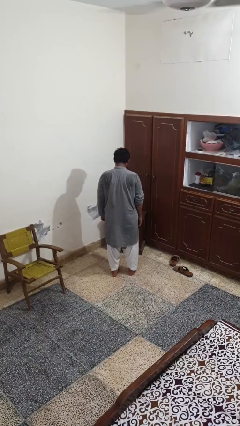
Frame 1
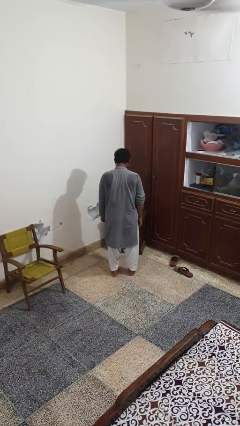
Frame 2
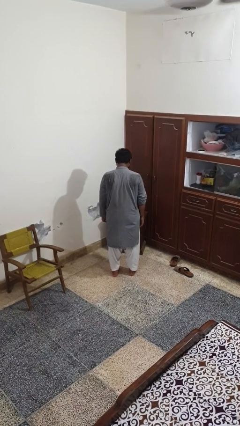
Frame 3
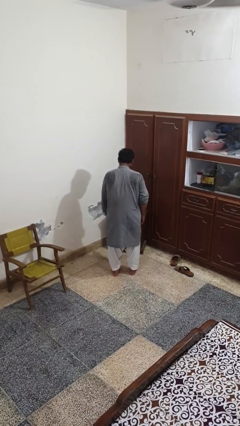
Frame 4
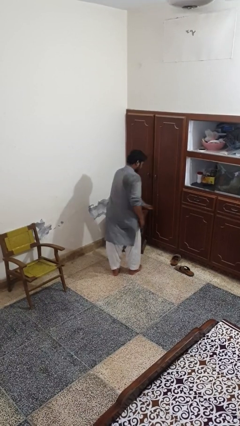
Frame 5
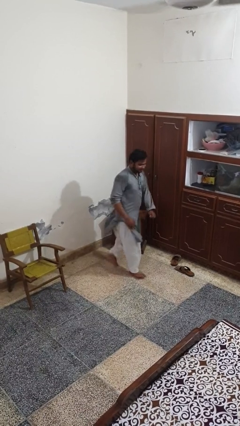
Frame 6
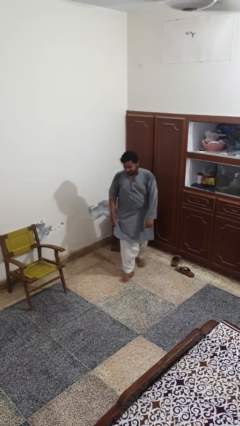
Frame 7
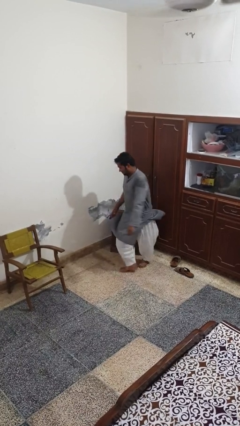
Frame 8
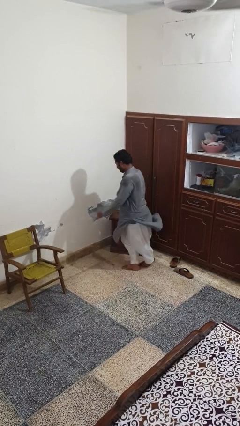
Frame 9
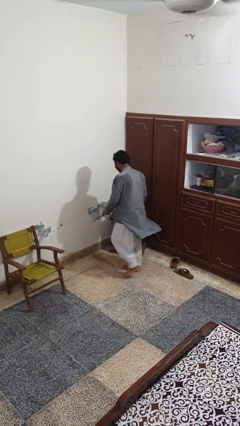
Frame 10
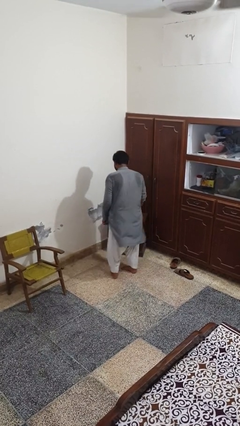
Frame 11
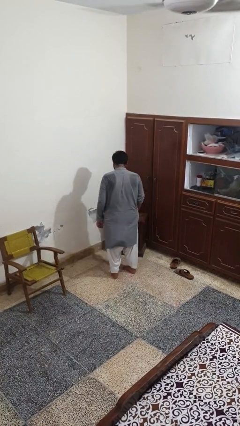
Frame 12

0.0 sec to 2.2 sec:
person twirls

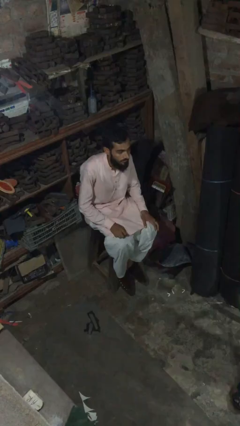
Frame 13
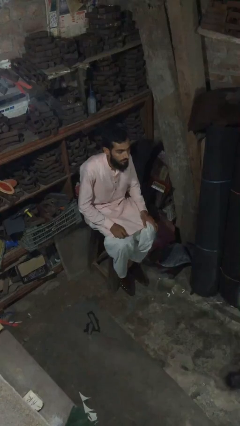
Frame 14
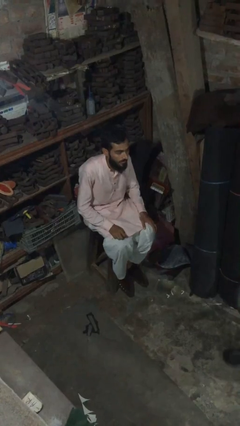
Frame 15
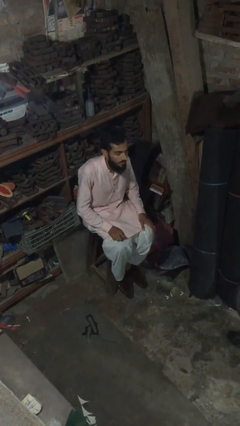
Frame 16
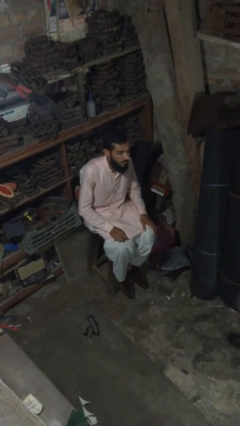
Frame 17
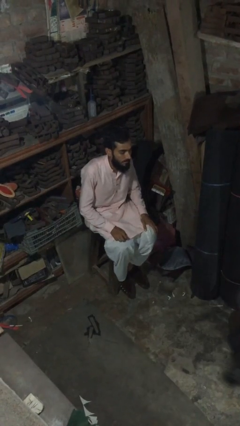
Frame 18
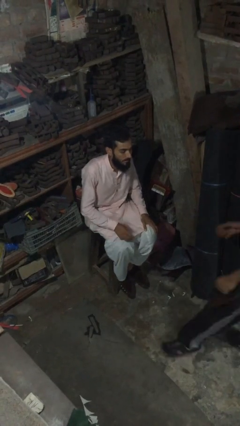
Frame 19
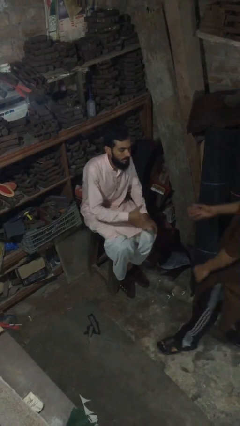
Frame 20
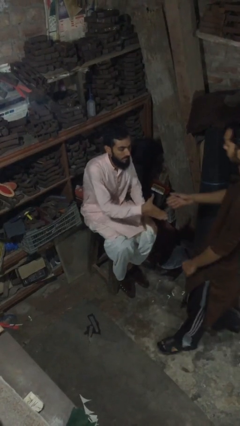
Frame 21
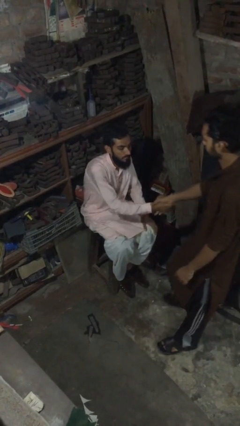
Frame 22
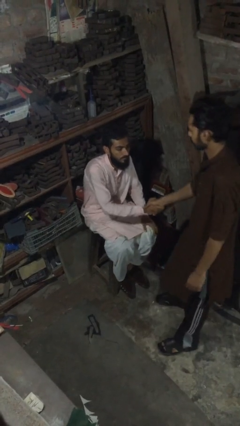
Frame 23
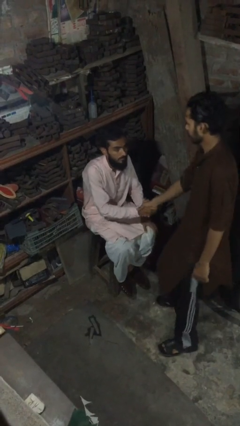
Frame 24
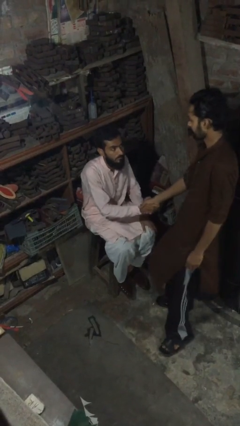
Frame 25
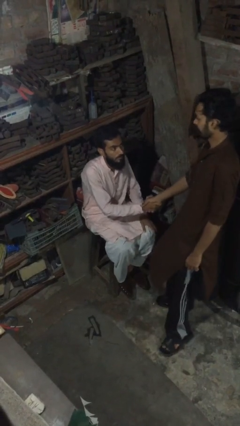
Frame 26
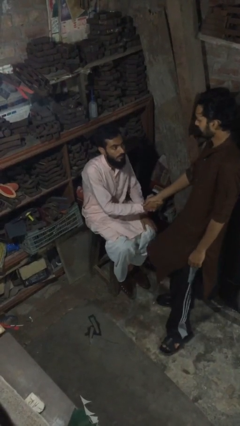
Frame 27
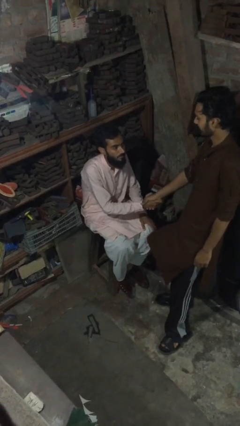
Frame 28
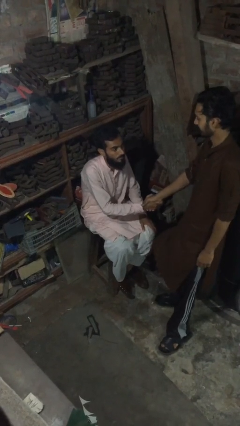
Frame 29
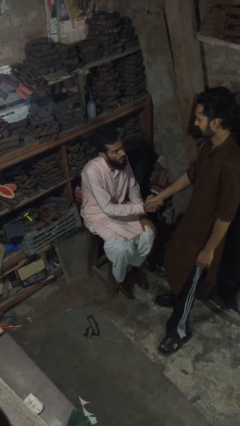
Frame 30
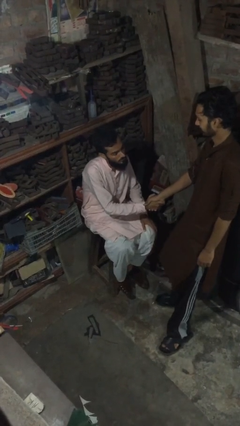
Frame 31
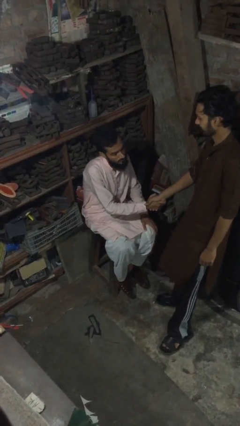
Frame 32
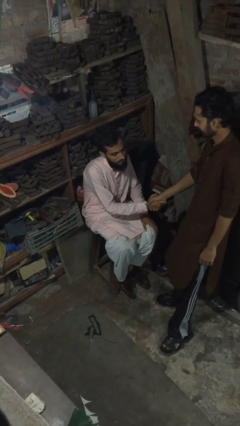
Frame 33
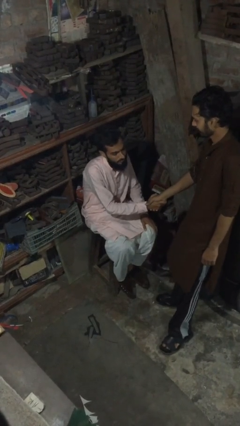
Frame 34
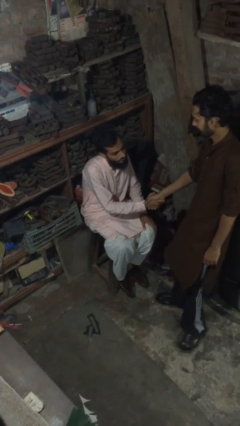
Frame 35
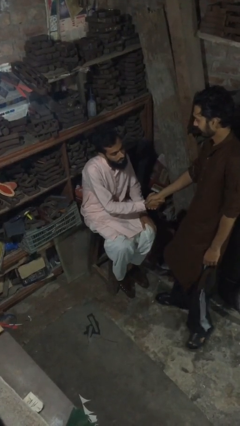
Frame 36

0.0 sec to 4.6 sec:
person shakes hand

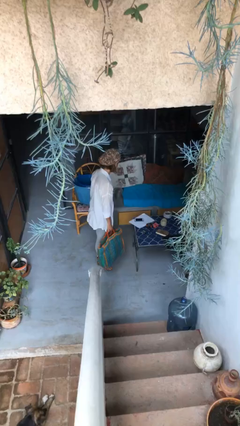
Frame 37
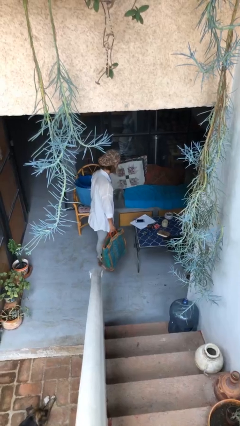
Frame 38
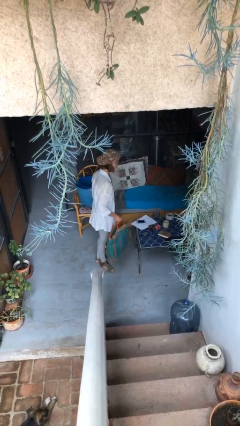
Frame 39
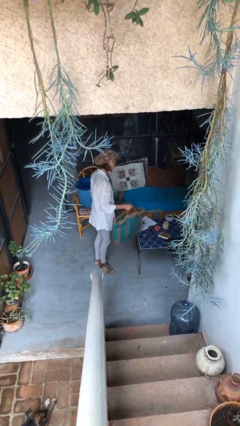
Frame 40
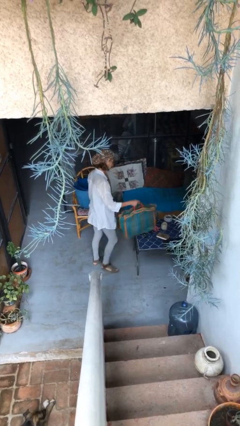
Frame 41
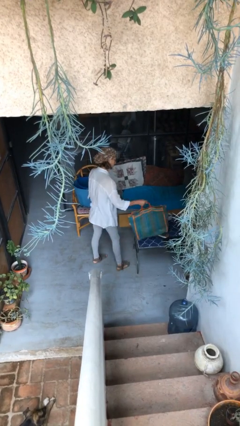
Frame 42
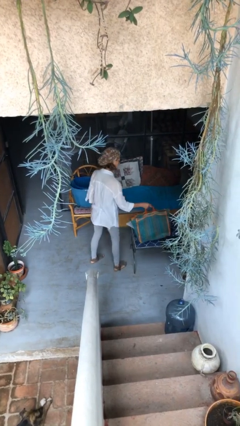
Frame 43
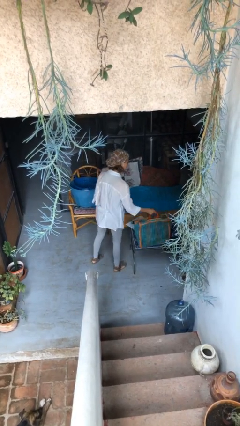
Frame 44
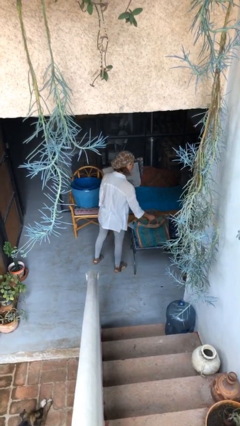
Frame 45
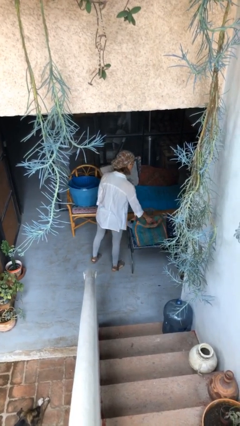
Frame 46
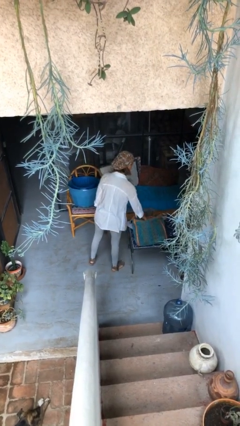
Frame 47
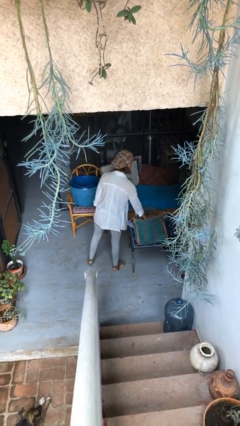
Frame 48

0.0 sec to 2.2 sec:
person puts down object on table

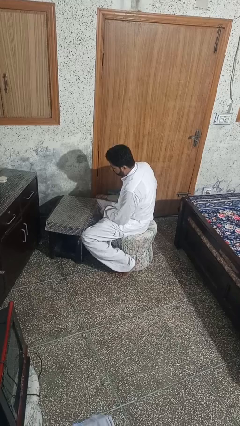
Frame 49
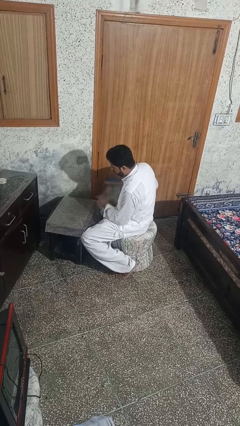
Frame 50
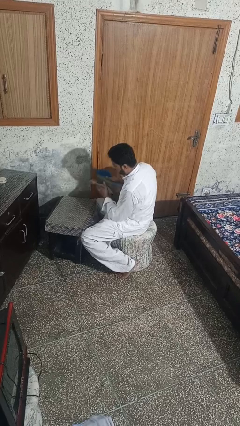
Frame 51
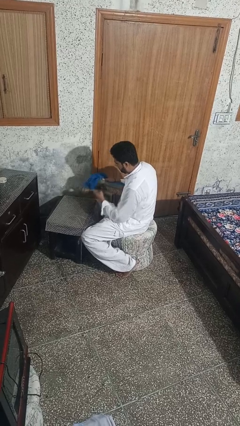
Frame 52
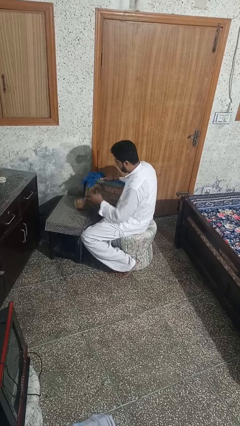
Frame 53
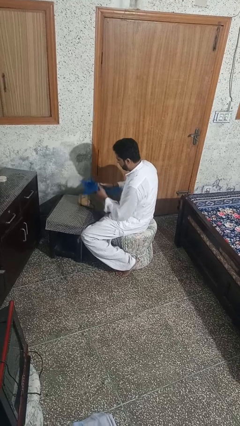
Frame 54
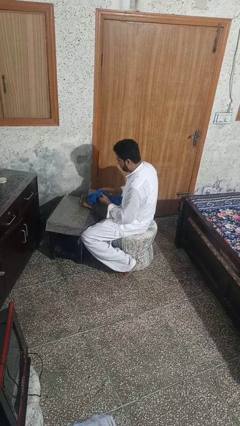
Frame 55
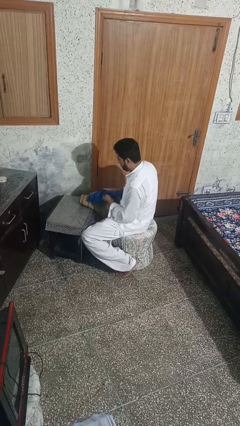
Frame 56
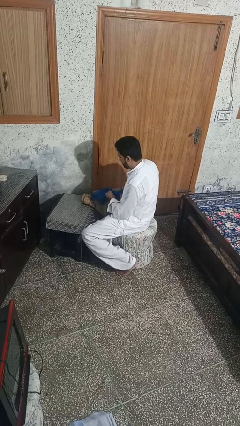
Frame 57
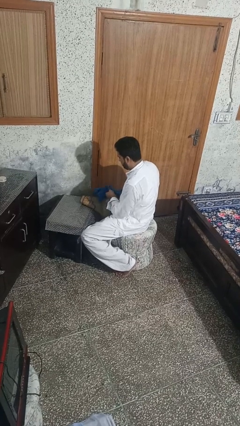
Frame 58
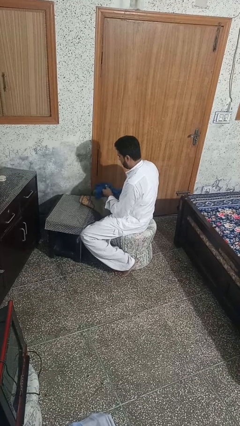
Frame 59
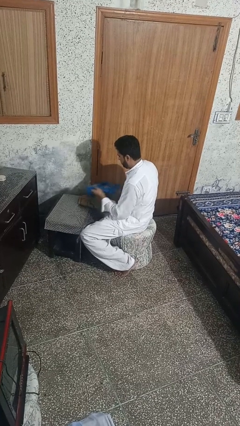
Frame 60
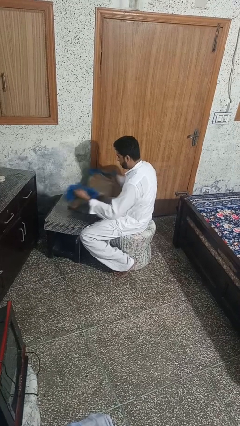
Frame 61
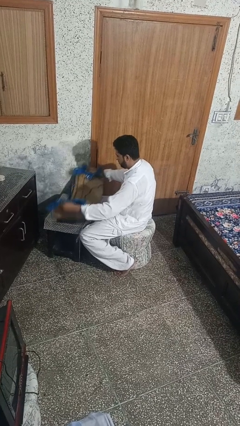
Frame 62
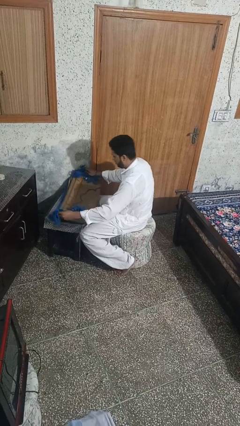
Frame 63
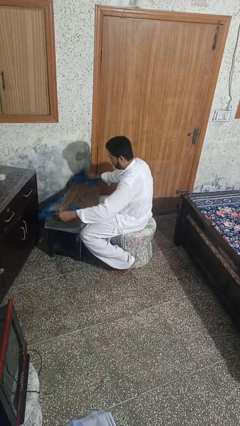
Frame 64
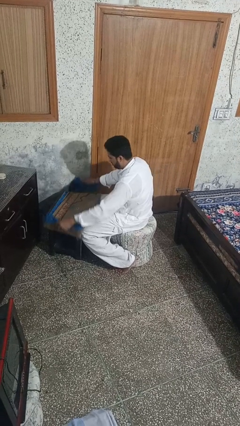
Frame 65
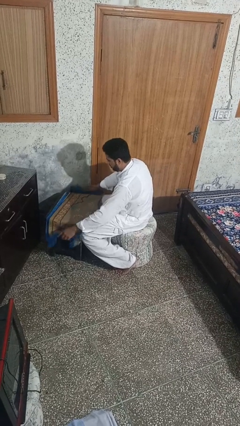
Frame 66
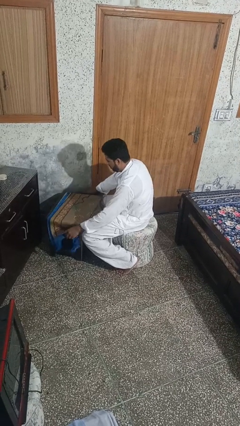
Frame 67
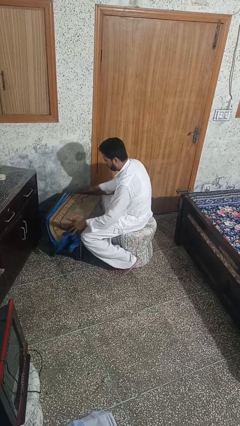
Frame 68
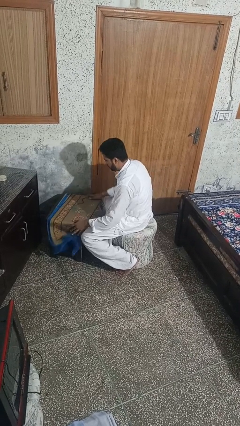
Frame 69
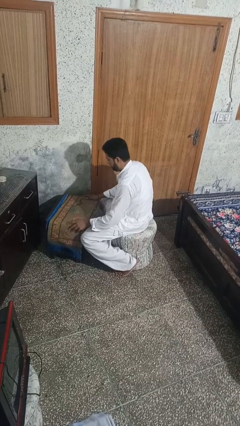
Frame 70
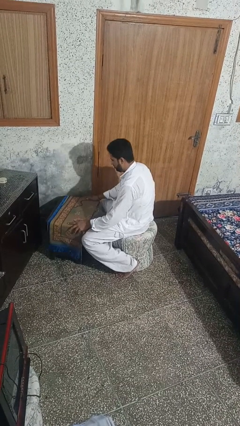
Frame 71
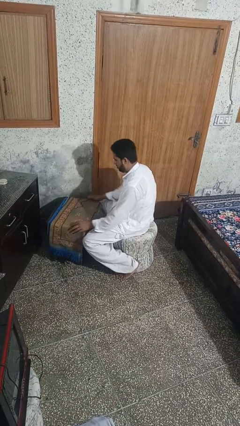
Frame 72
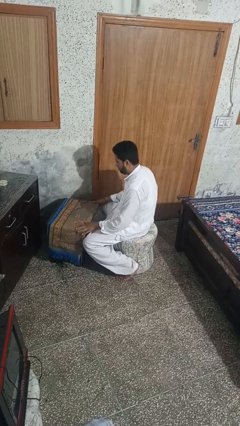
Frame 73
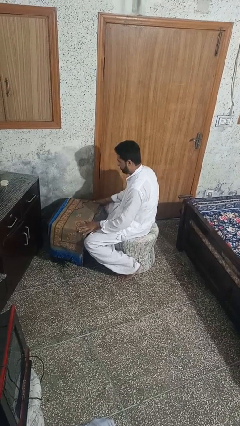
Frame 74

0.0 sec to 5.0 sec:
person spreads tablecloth

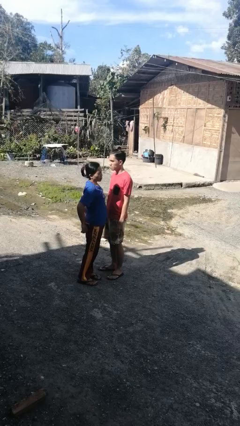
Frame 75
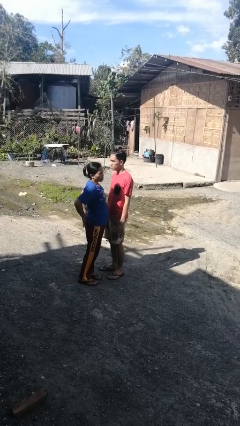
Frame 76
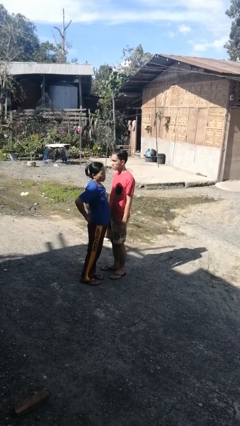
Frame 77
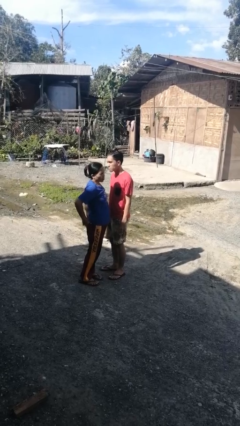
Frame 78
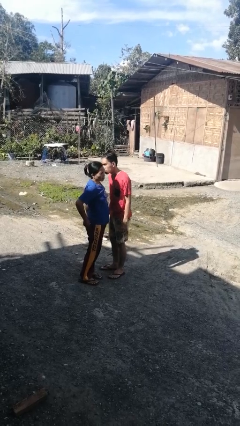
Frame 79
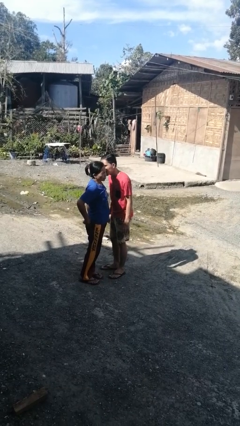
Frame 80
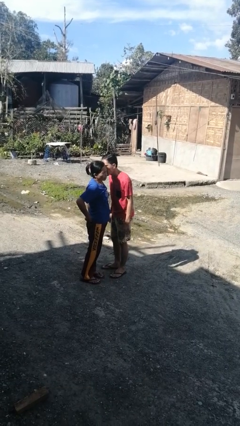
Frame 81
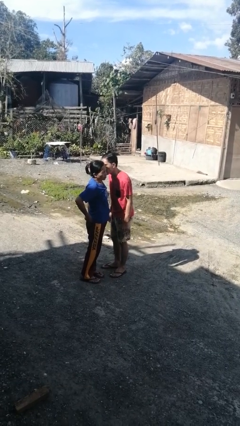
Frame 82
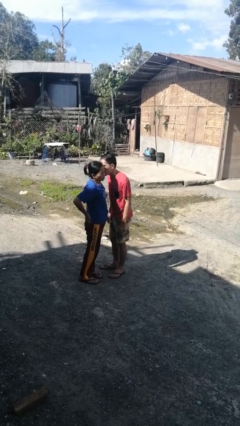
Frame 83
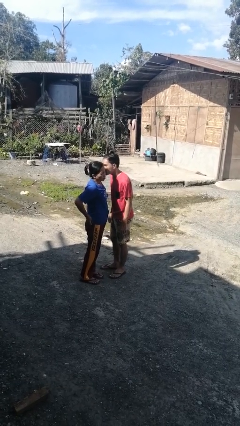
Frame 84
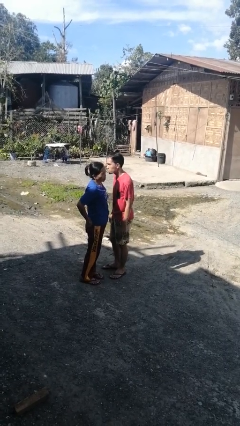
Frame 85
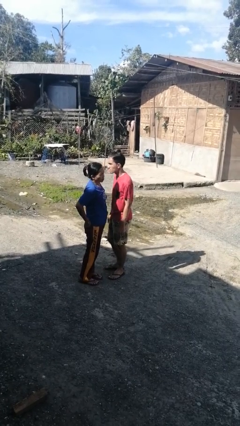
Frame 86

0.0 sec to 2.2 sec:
person kisses cheek of person

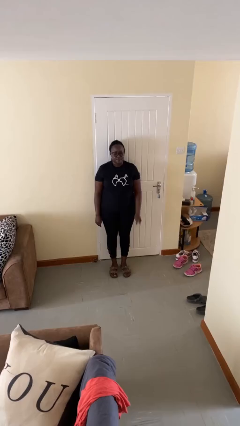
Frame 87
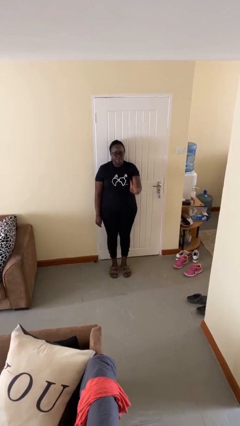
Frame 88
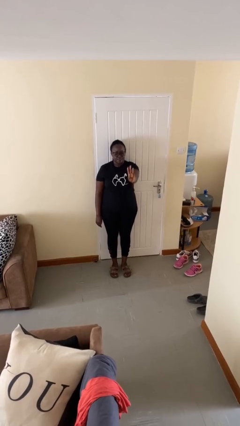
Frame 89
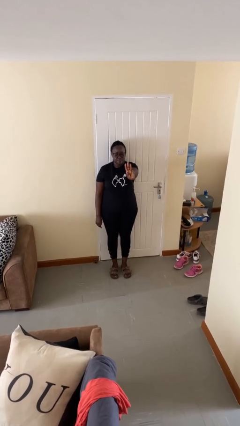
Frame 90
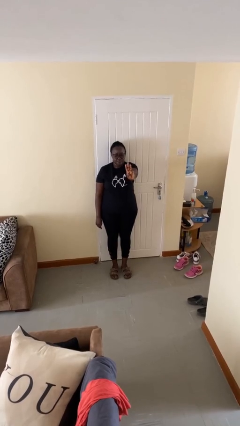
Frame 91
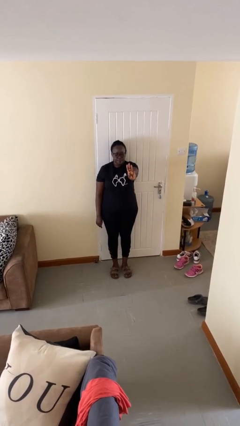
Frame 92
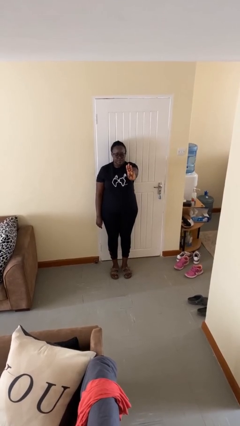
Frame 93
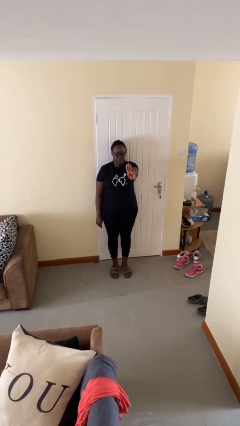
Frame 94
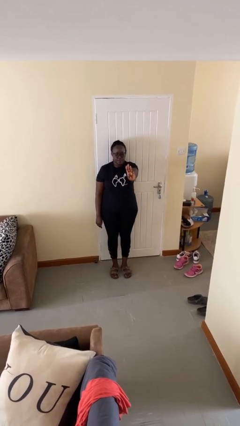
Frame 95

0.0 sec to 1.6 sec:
person gestures number three
